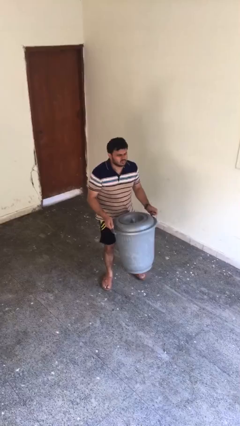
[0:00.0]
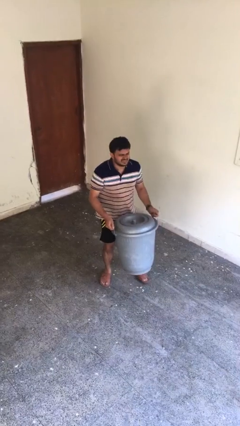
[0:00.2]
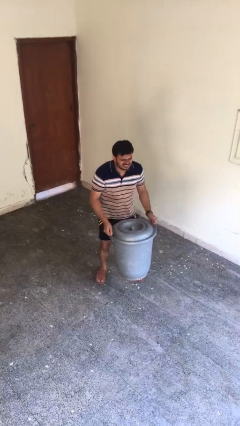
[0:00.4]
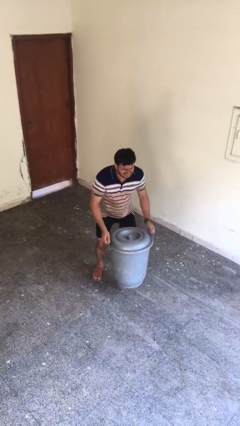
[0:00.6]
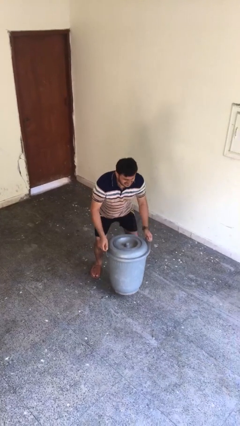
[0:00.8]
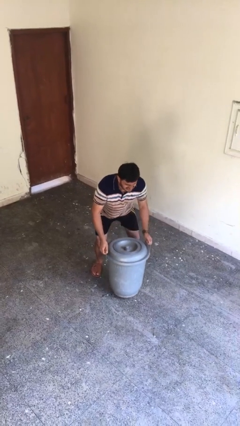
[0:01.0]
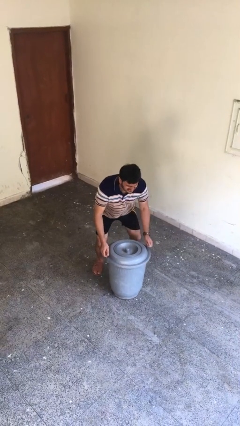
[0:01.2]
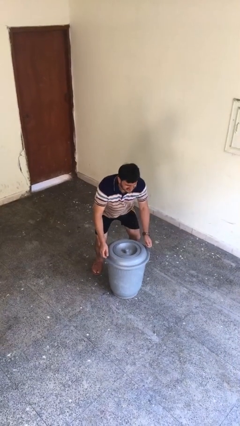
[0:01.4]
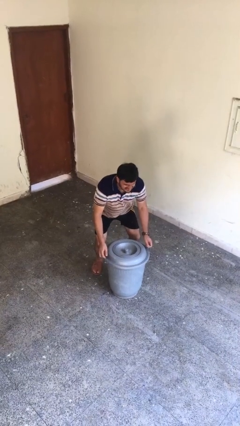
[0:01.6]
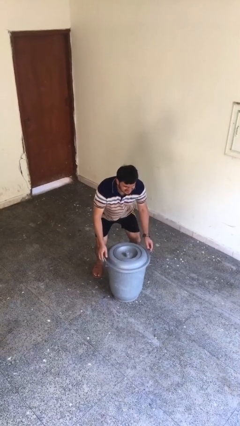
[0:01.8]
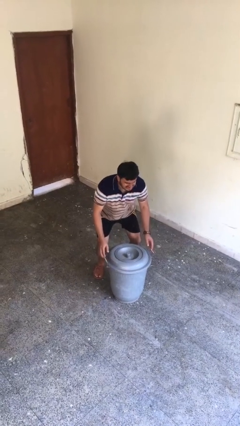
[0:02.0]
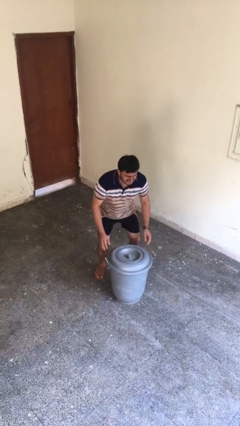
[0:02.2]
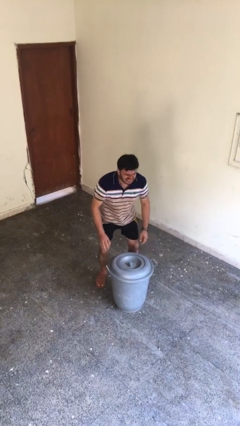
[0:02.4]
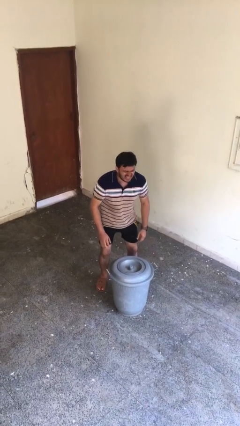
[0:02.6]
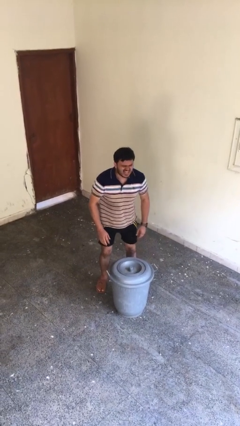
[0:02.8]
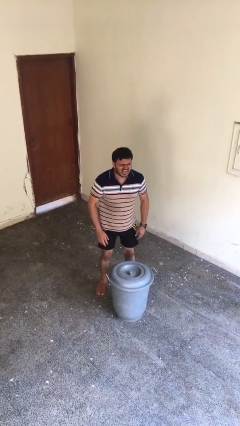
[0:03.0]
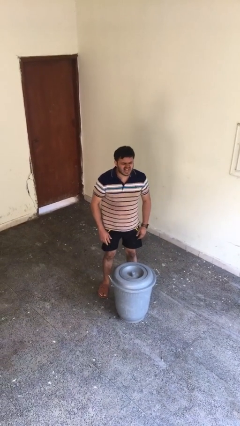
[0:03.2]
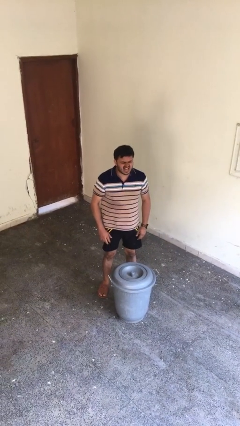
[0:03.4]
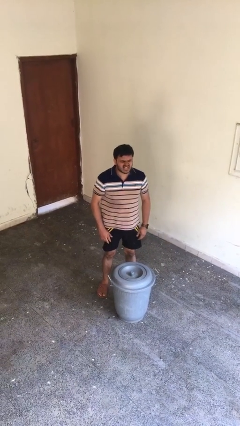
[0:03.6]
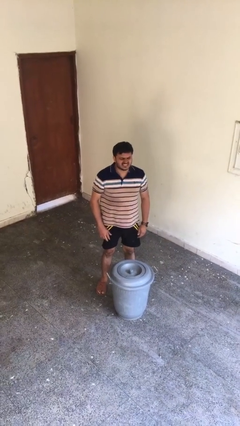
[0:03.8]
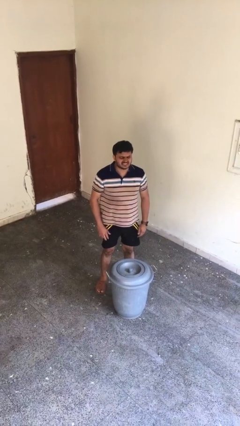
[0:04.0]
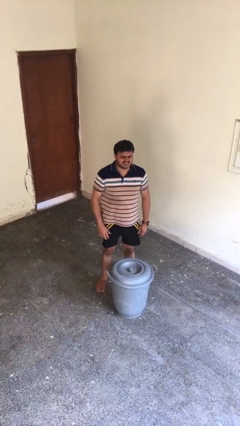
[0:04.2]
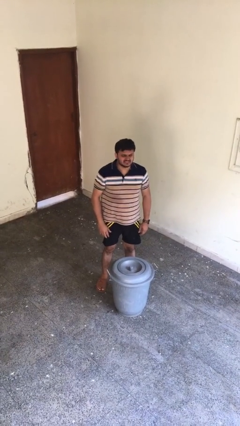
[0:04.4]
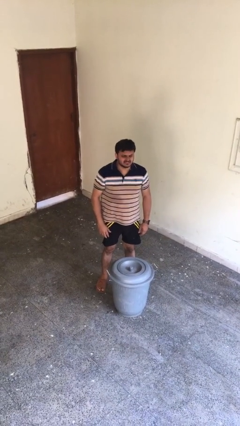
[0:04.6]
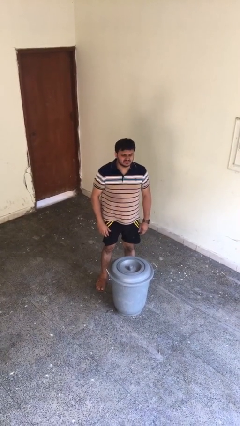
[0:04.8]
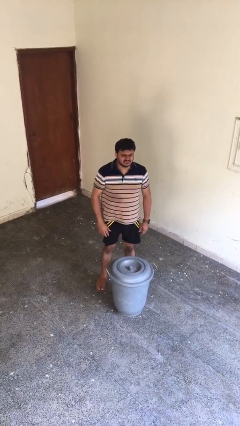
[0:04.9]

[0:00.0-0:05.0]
person puts down object on floor

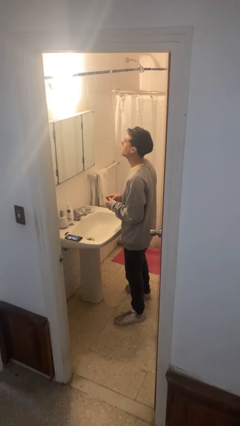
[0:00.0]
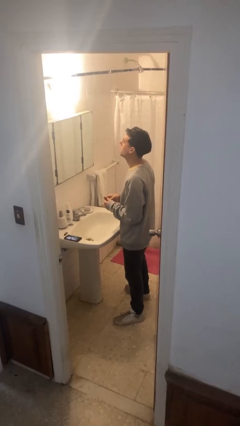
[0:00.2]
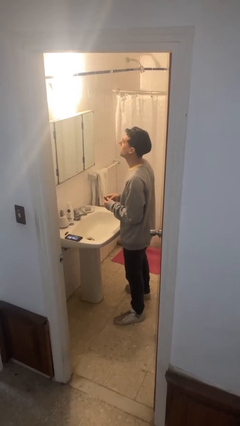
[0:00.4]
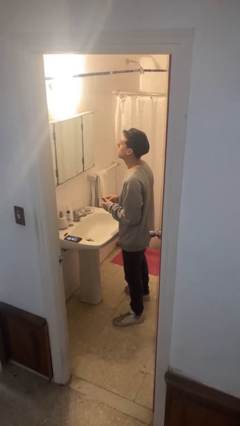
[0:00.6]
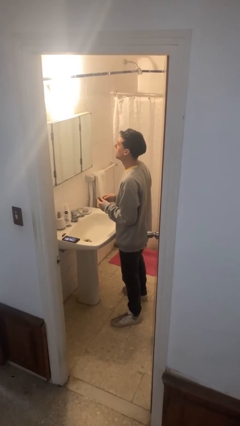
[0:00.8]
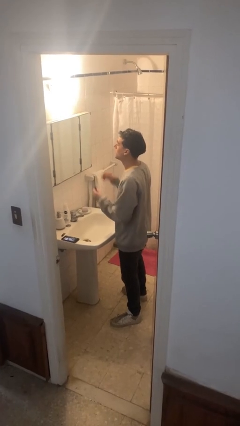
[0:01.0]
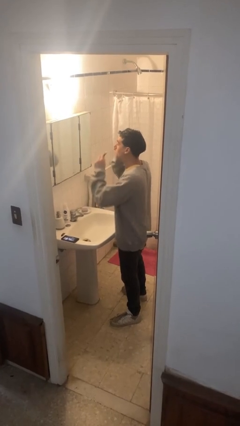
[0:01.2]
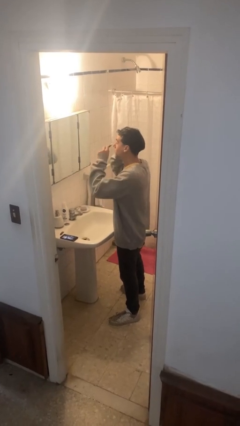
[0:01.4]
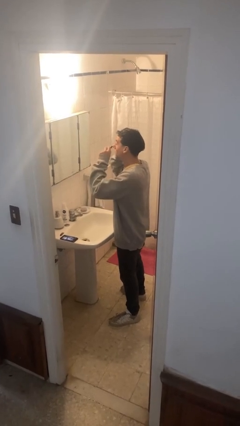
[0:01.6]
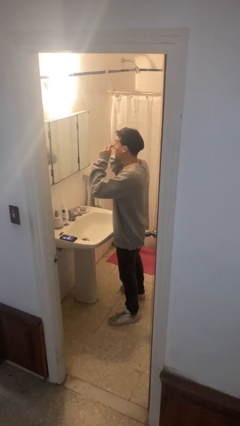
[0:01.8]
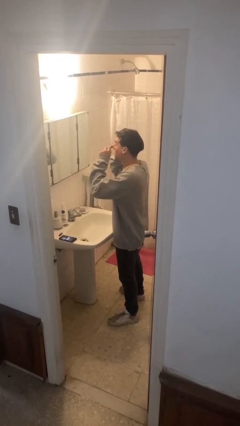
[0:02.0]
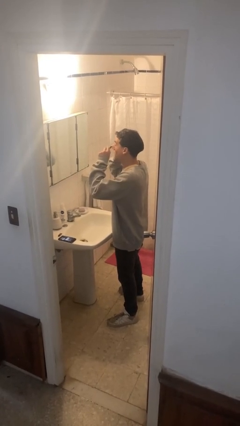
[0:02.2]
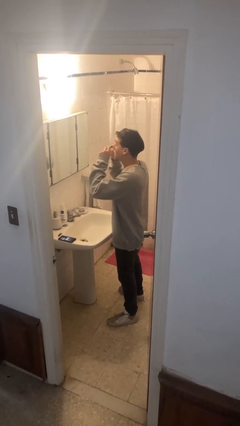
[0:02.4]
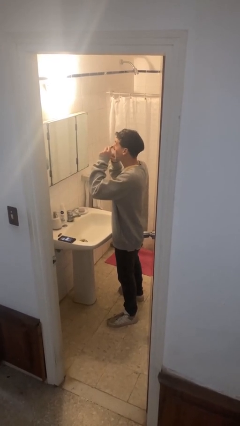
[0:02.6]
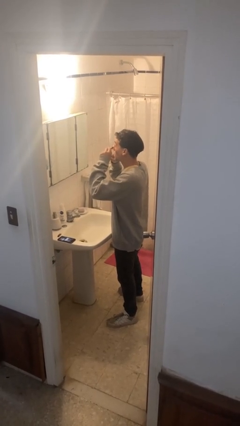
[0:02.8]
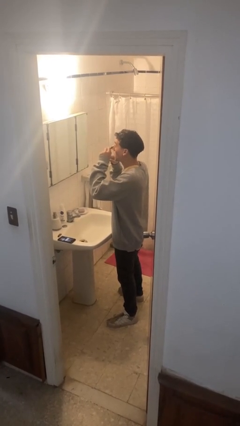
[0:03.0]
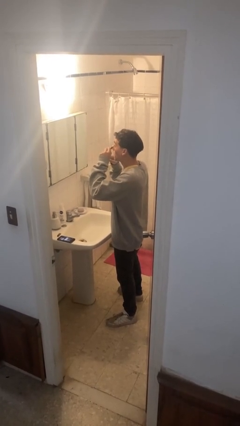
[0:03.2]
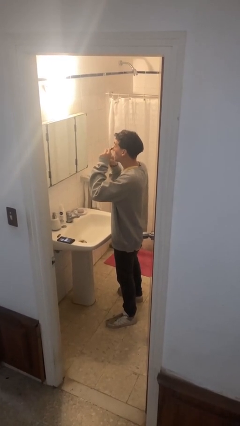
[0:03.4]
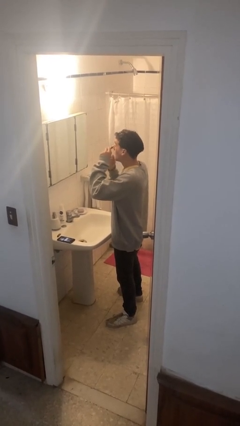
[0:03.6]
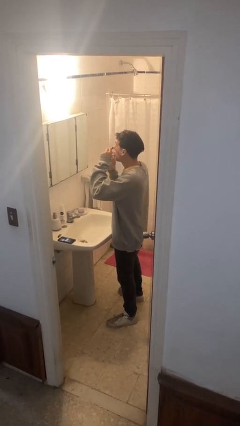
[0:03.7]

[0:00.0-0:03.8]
person applies eye makeup

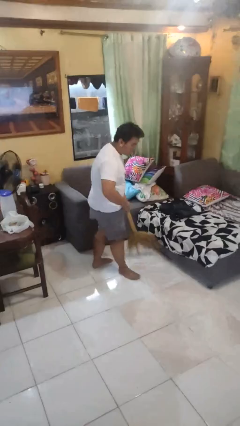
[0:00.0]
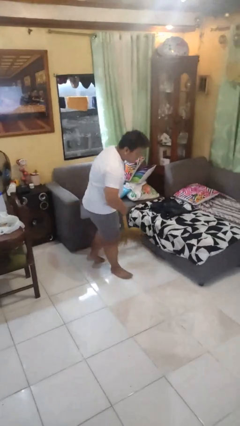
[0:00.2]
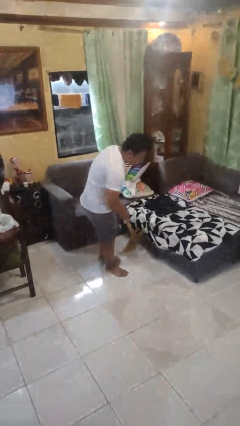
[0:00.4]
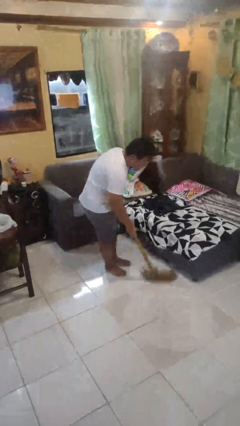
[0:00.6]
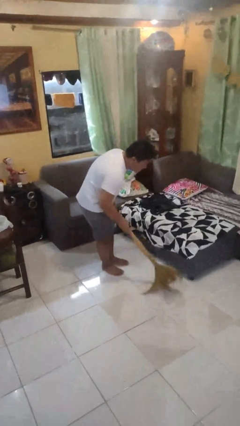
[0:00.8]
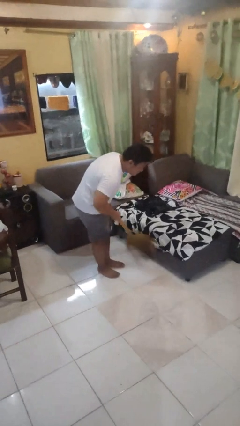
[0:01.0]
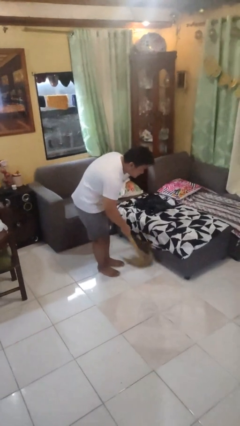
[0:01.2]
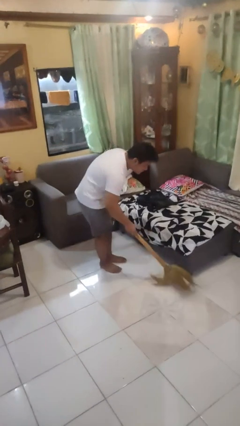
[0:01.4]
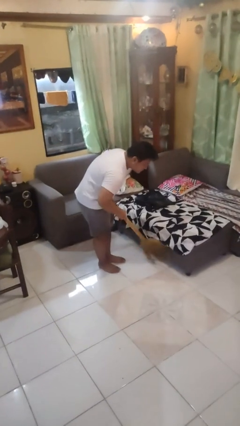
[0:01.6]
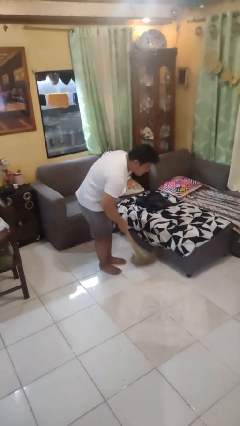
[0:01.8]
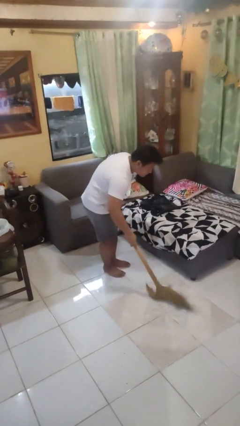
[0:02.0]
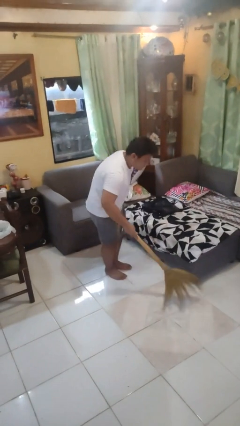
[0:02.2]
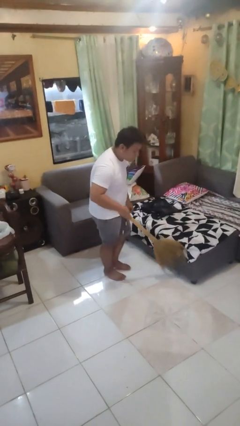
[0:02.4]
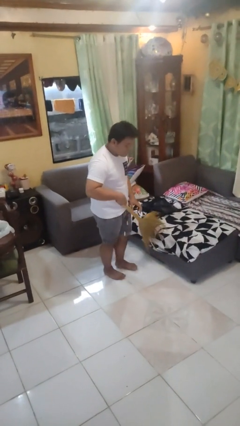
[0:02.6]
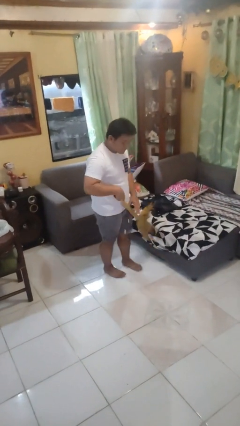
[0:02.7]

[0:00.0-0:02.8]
person sweeps floor

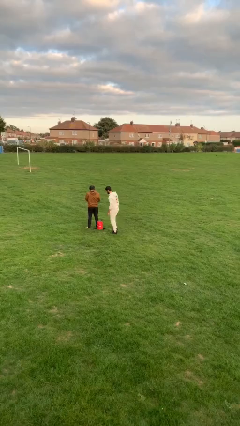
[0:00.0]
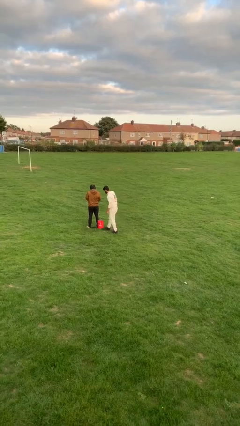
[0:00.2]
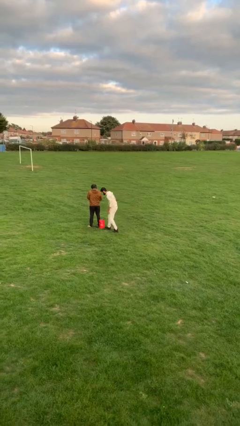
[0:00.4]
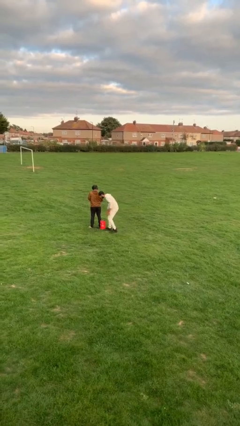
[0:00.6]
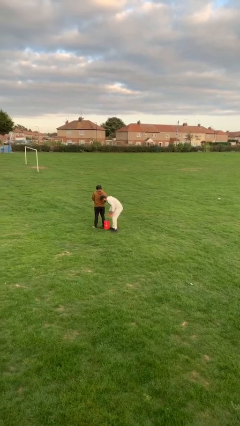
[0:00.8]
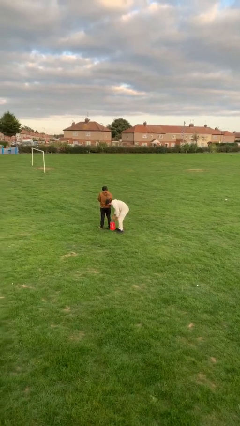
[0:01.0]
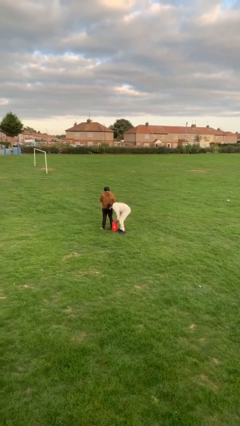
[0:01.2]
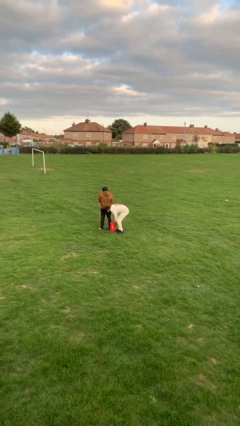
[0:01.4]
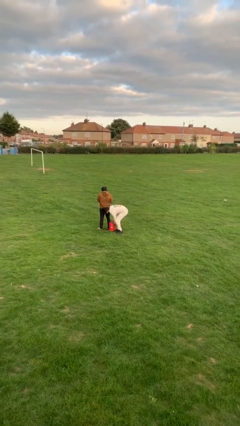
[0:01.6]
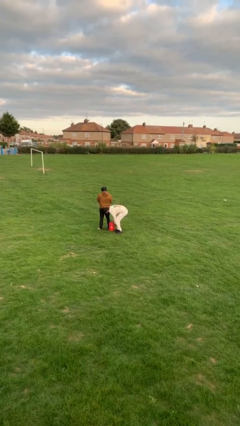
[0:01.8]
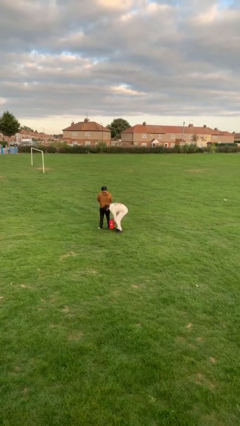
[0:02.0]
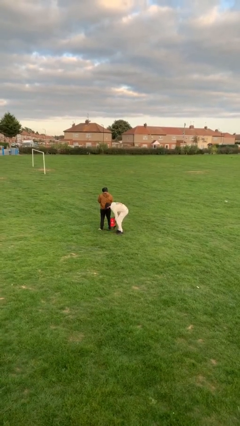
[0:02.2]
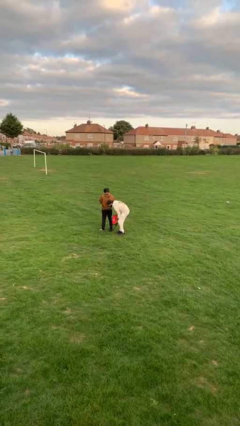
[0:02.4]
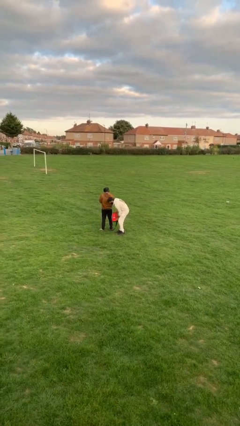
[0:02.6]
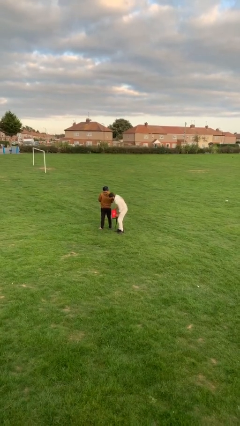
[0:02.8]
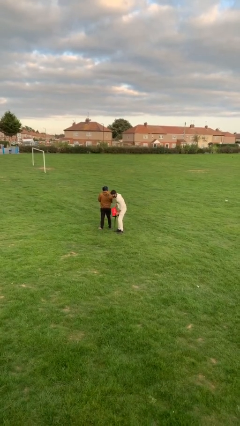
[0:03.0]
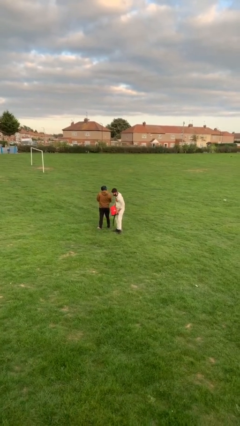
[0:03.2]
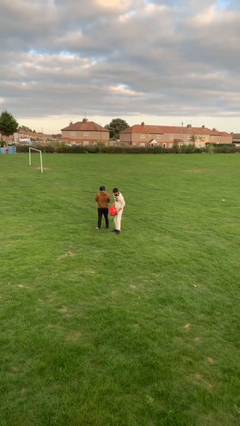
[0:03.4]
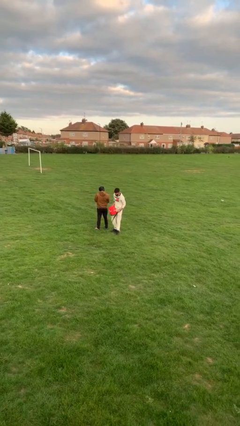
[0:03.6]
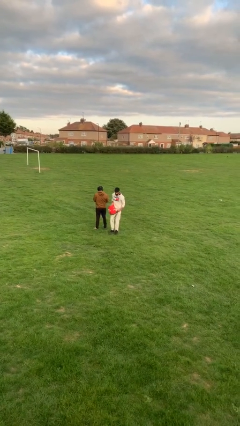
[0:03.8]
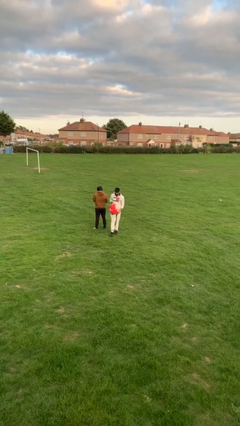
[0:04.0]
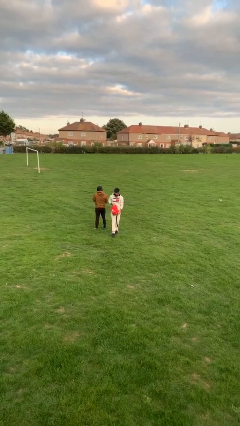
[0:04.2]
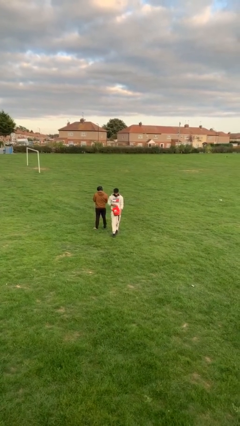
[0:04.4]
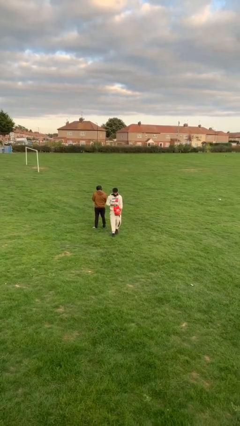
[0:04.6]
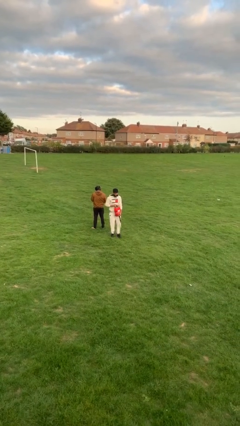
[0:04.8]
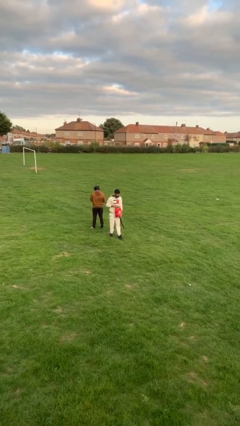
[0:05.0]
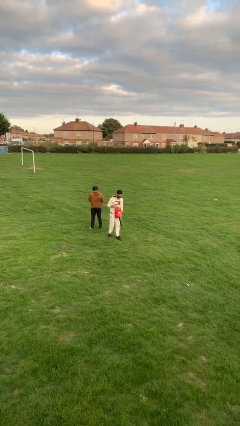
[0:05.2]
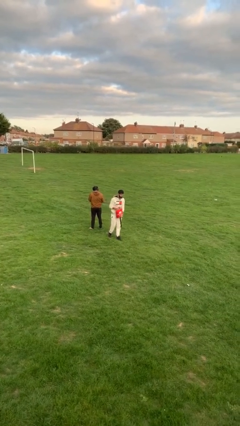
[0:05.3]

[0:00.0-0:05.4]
person steals object from person

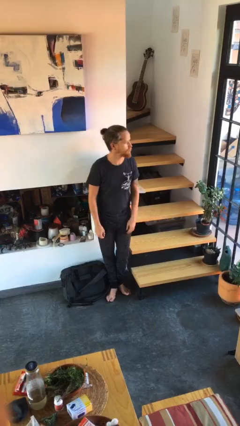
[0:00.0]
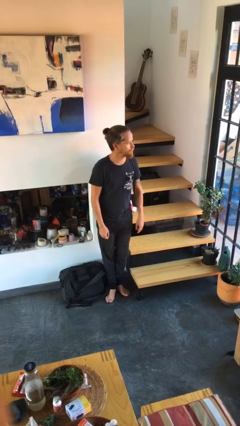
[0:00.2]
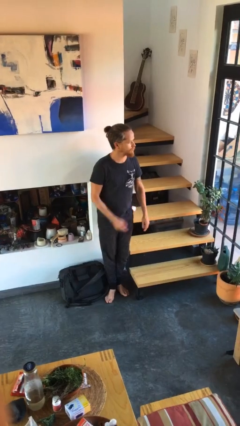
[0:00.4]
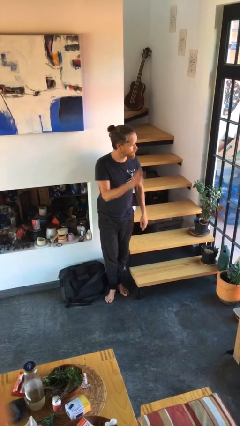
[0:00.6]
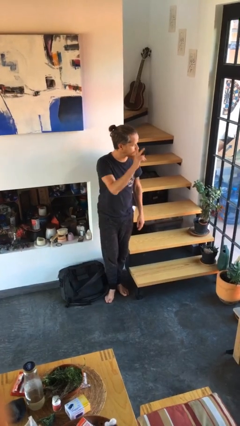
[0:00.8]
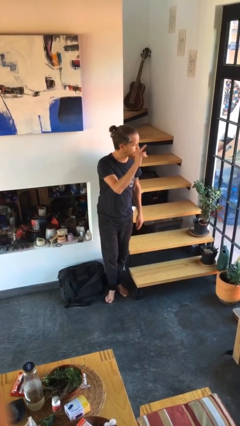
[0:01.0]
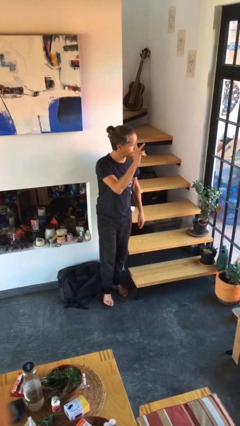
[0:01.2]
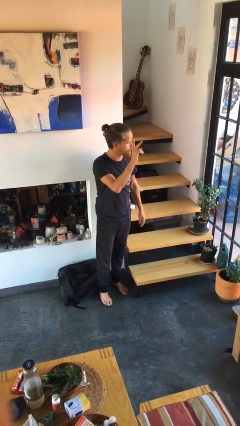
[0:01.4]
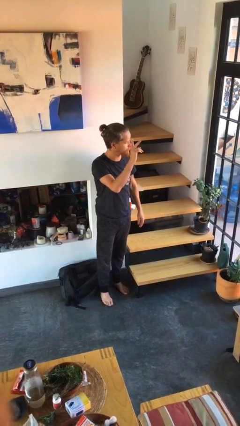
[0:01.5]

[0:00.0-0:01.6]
person gestures raise hand
